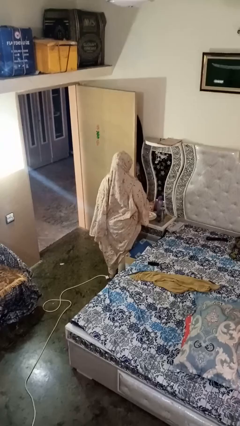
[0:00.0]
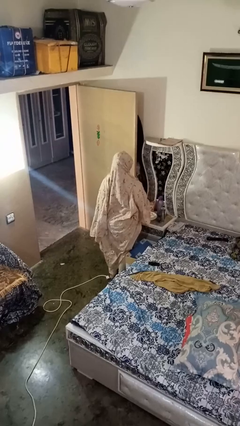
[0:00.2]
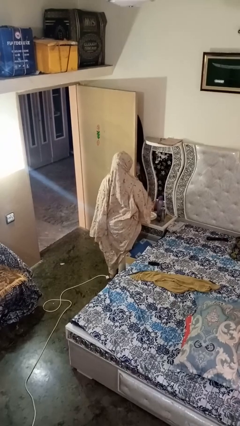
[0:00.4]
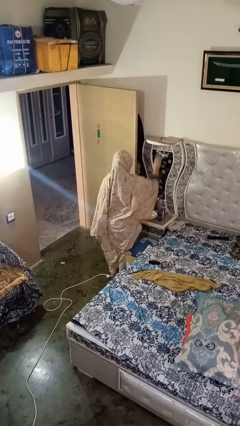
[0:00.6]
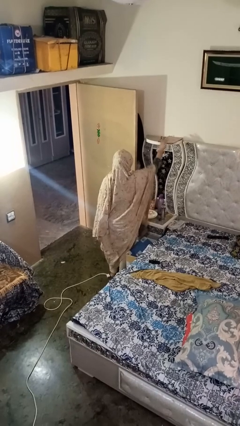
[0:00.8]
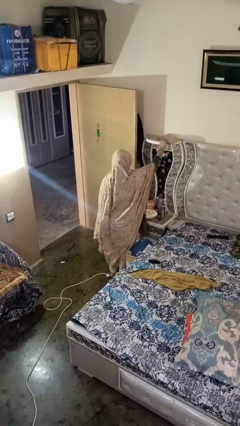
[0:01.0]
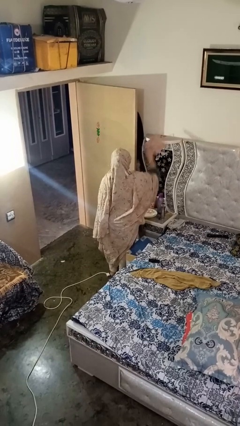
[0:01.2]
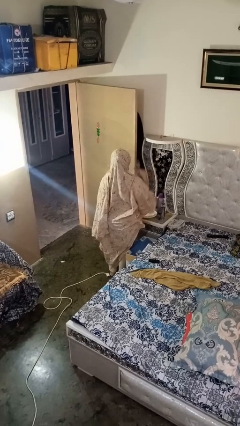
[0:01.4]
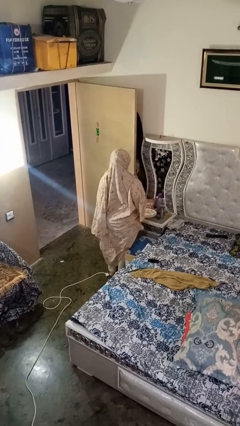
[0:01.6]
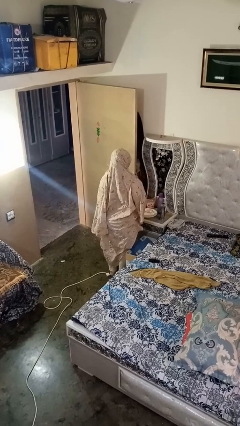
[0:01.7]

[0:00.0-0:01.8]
person picks up object from shelf

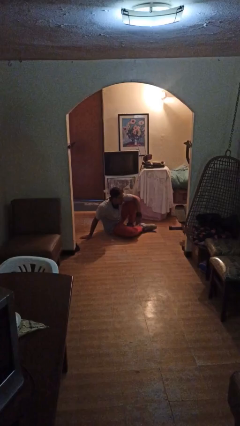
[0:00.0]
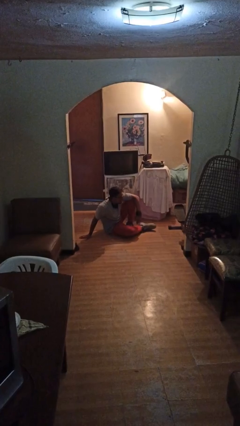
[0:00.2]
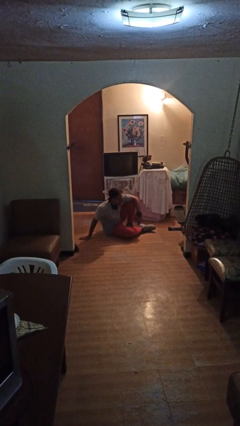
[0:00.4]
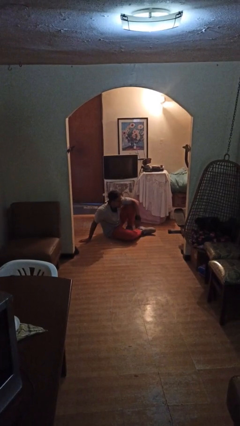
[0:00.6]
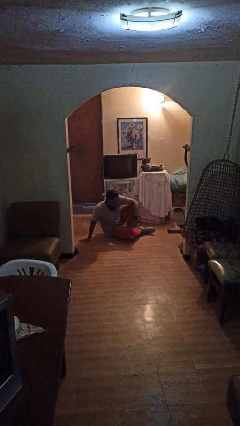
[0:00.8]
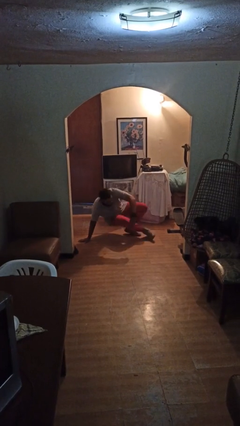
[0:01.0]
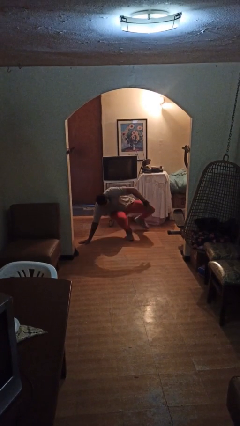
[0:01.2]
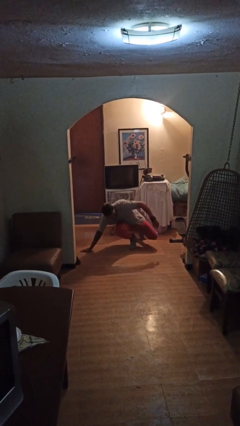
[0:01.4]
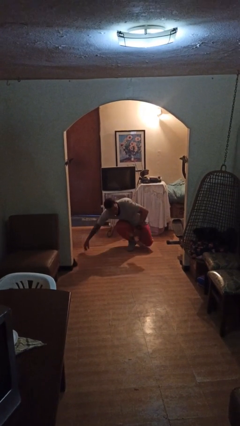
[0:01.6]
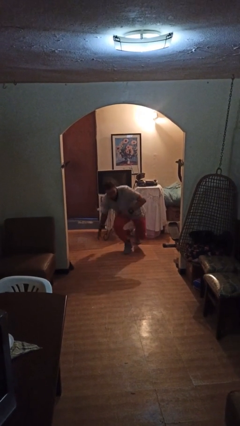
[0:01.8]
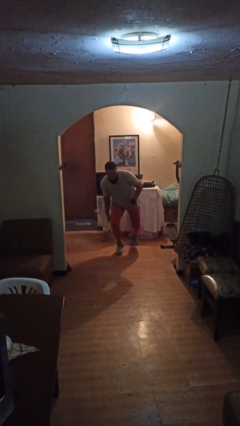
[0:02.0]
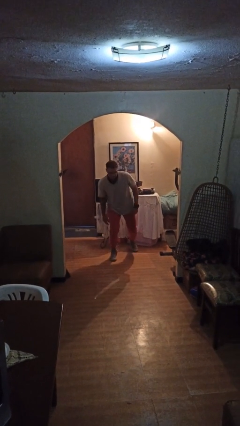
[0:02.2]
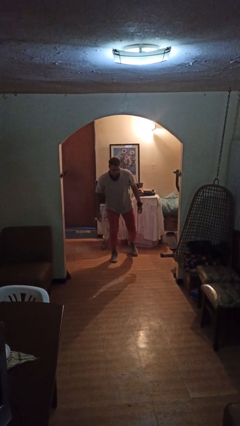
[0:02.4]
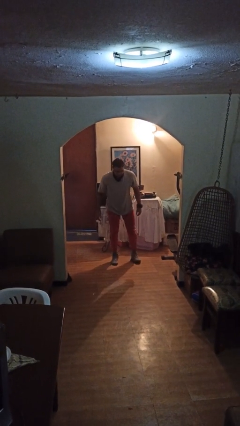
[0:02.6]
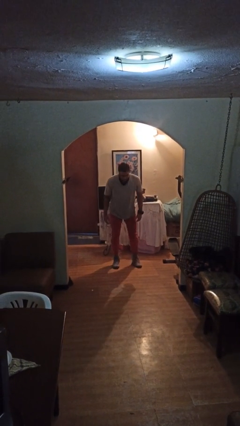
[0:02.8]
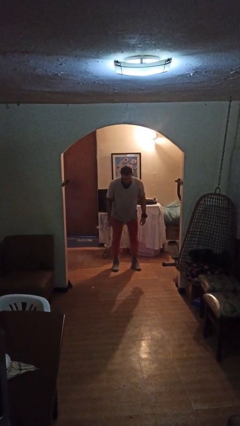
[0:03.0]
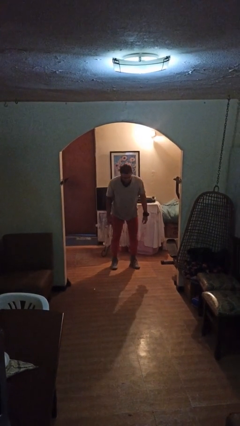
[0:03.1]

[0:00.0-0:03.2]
person stands up

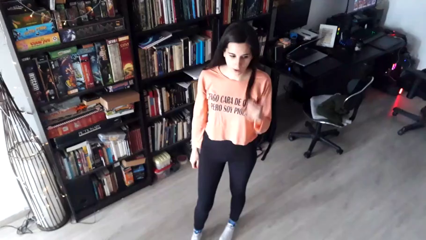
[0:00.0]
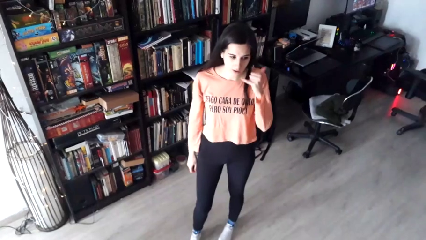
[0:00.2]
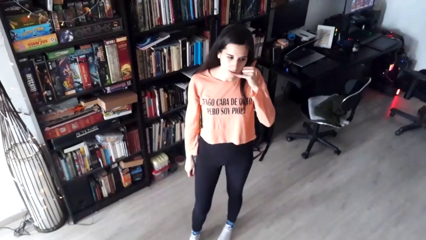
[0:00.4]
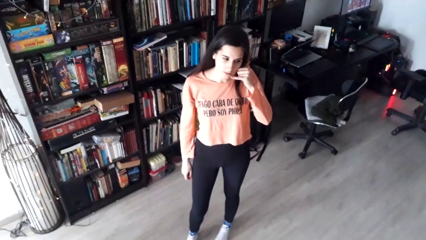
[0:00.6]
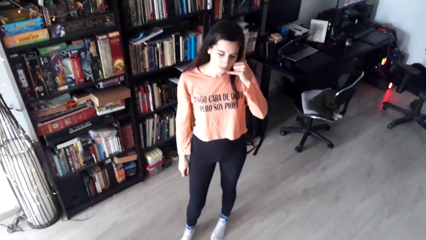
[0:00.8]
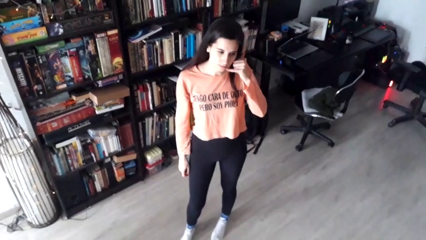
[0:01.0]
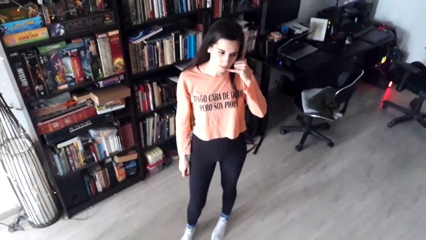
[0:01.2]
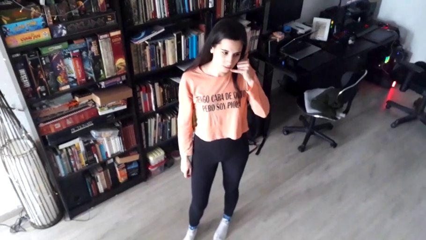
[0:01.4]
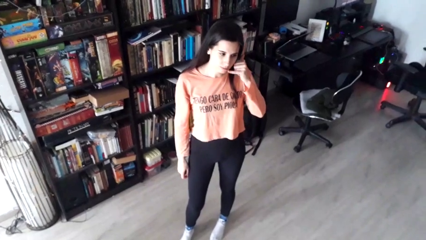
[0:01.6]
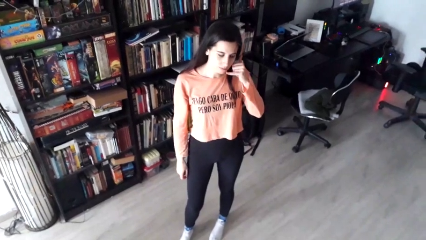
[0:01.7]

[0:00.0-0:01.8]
person gestures call me

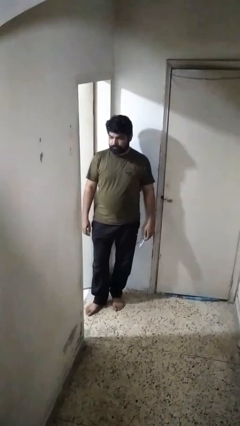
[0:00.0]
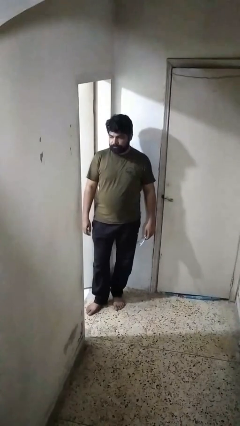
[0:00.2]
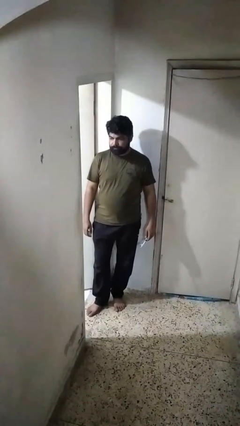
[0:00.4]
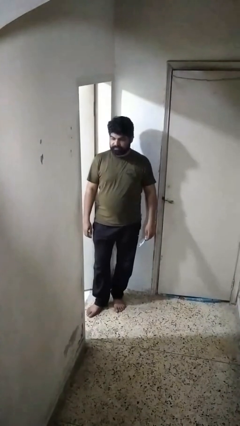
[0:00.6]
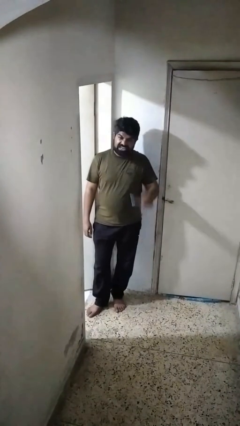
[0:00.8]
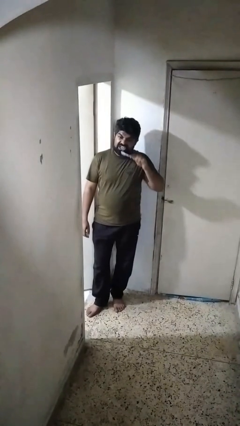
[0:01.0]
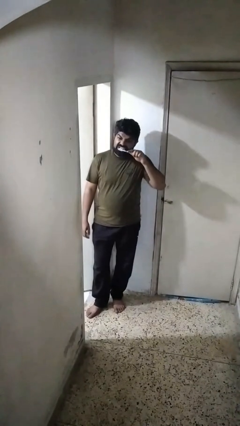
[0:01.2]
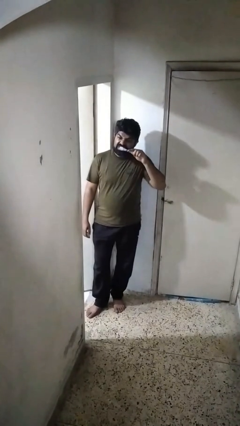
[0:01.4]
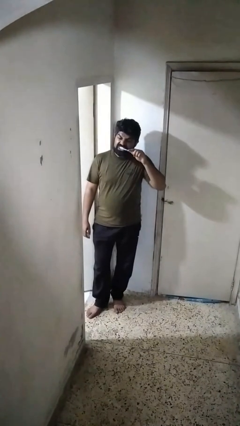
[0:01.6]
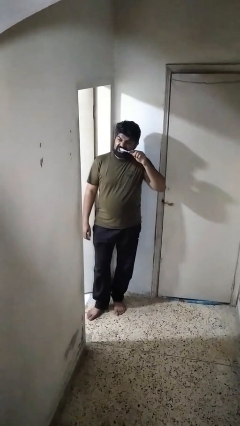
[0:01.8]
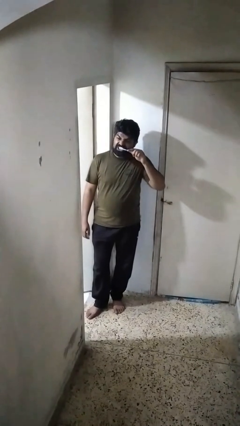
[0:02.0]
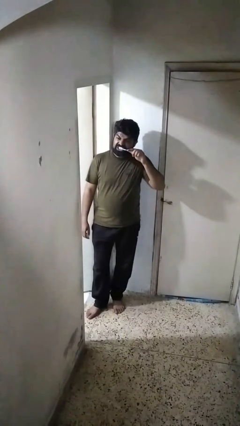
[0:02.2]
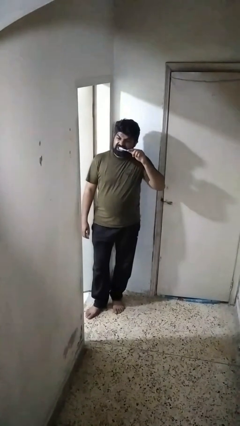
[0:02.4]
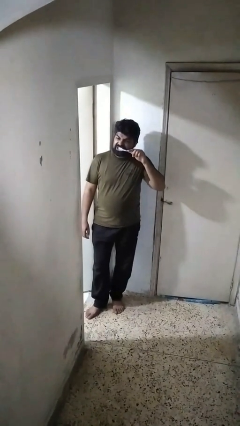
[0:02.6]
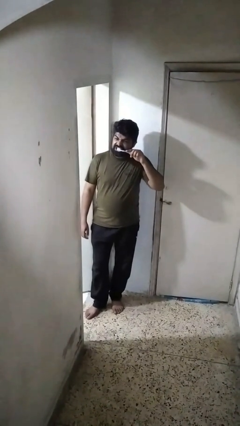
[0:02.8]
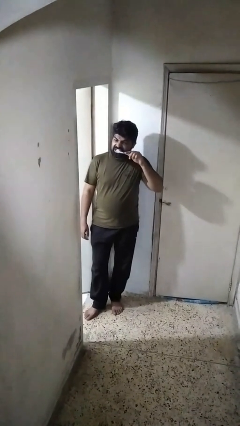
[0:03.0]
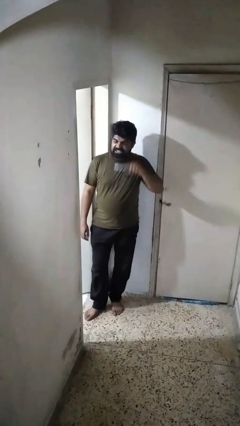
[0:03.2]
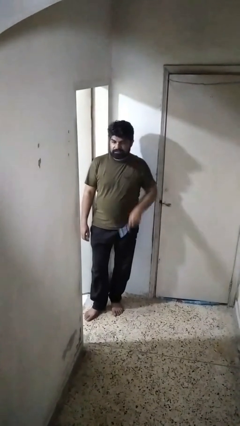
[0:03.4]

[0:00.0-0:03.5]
person brushes teeth

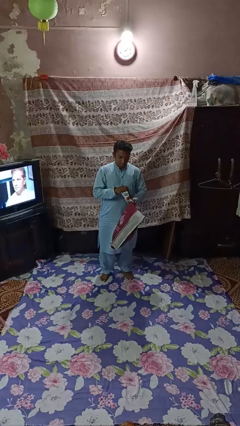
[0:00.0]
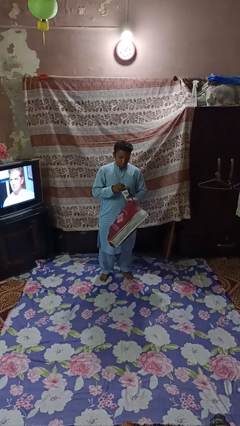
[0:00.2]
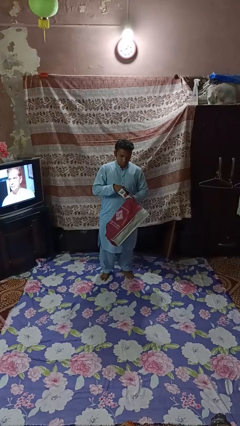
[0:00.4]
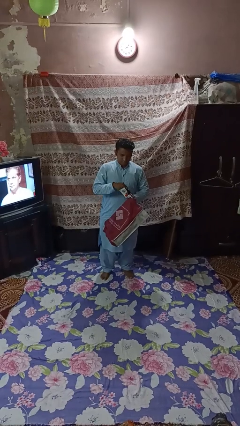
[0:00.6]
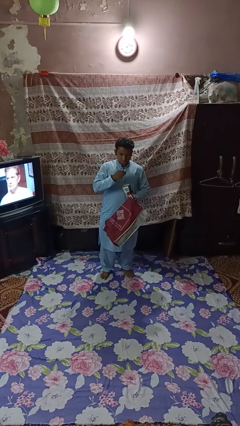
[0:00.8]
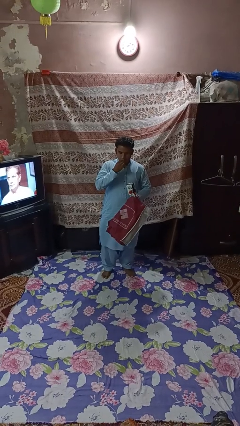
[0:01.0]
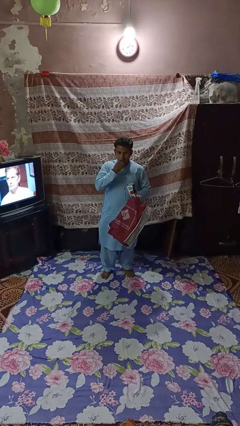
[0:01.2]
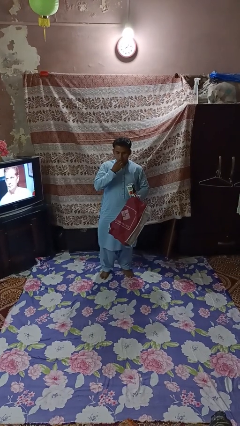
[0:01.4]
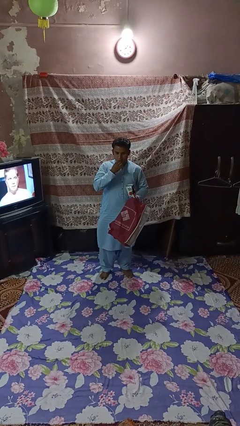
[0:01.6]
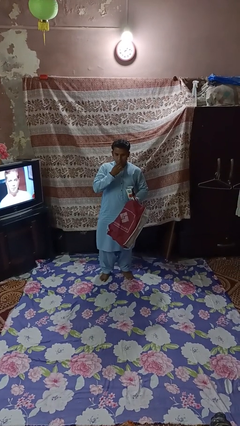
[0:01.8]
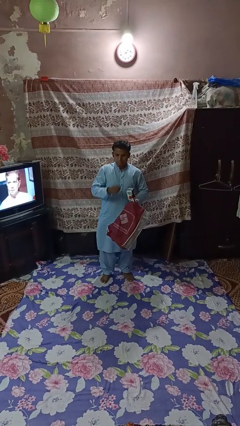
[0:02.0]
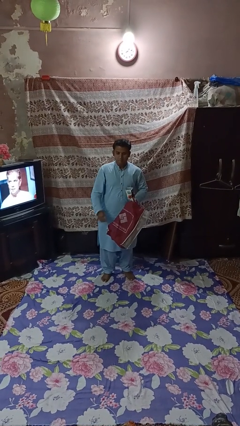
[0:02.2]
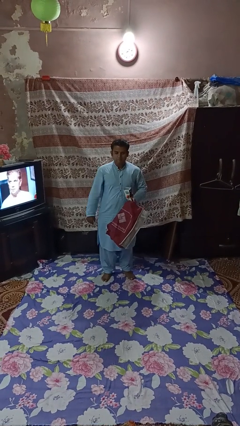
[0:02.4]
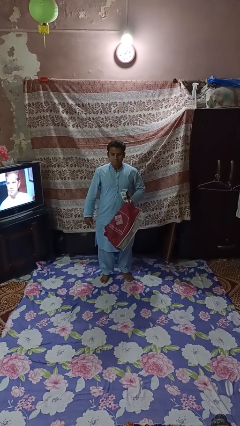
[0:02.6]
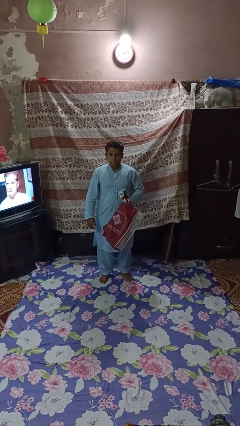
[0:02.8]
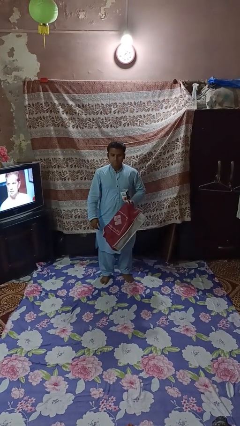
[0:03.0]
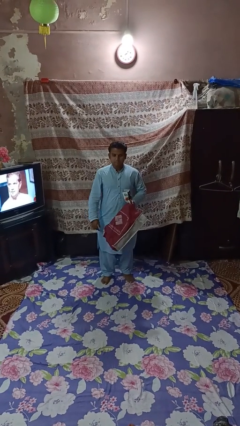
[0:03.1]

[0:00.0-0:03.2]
person eats snack from bag

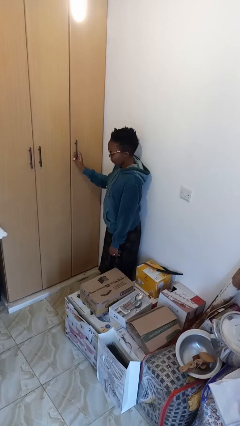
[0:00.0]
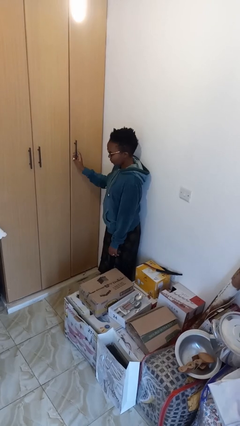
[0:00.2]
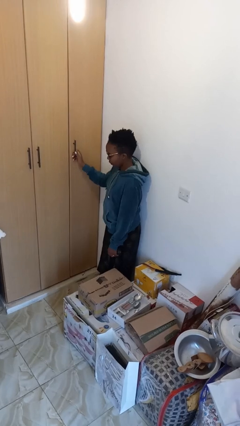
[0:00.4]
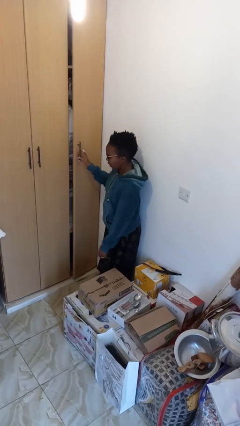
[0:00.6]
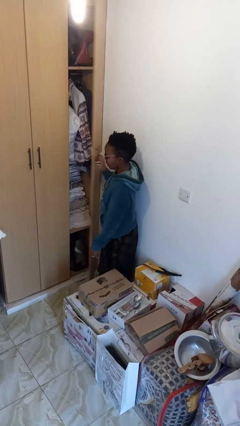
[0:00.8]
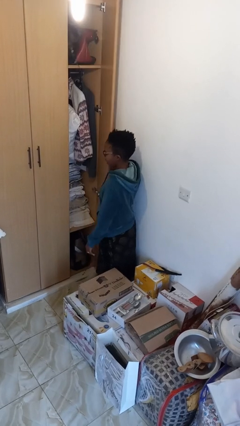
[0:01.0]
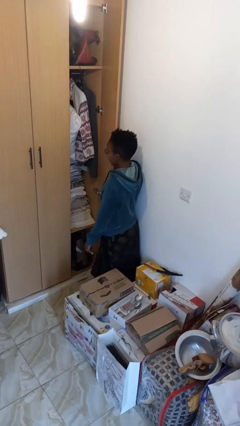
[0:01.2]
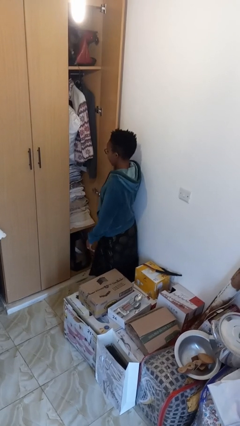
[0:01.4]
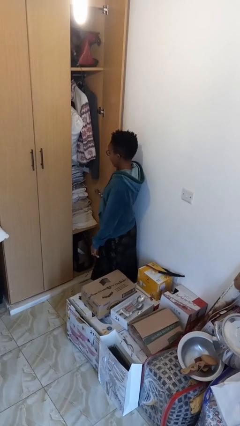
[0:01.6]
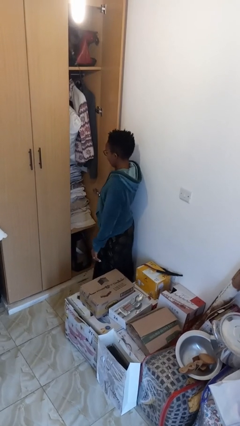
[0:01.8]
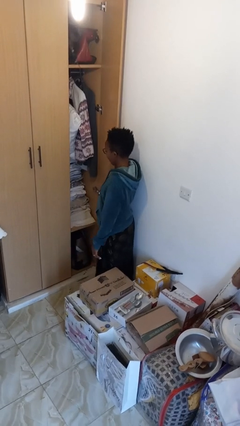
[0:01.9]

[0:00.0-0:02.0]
person opens closet door

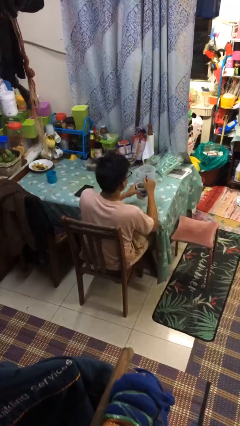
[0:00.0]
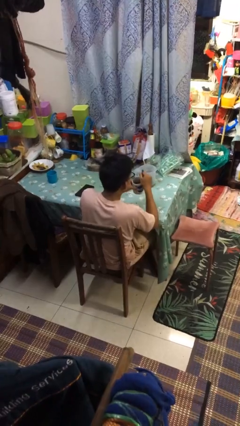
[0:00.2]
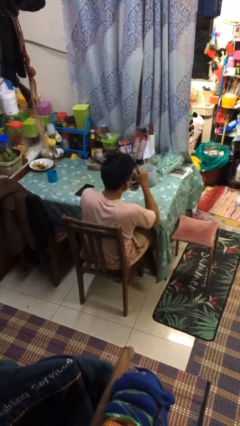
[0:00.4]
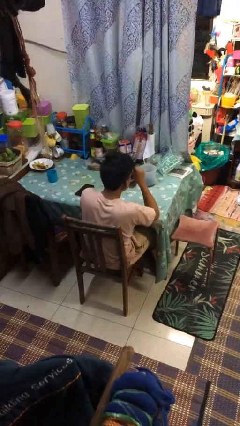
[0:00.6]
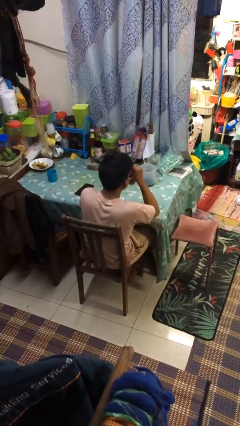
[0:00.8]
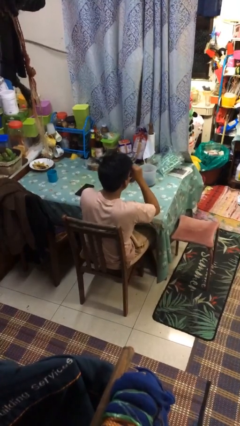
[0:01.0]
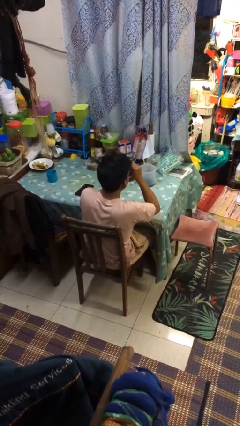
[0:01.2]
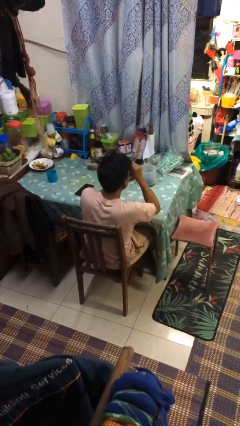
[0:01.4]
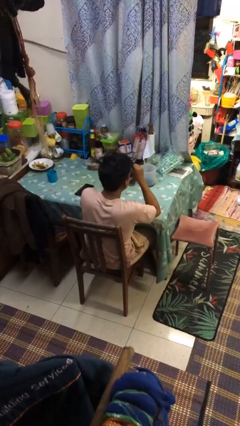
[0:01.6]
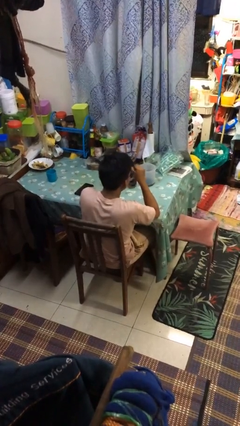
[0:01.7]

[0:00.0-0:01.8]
person drinks from mug
